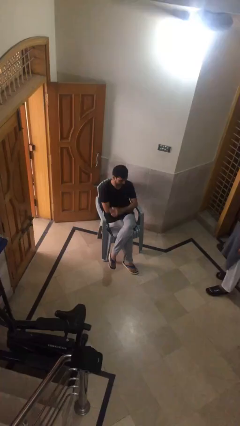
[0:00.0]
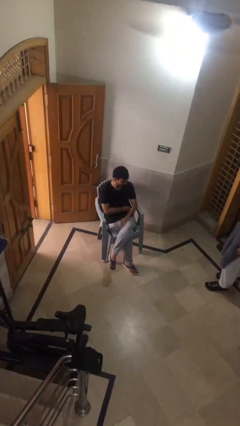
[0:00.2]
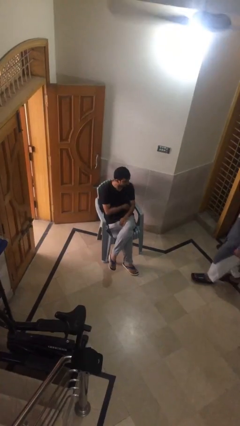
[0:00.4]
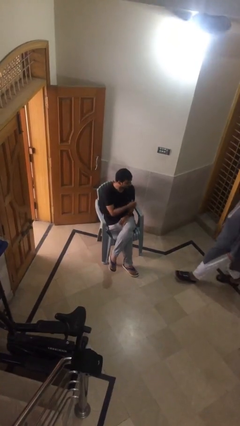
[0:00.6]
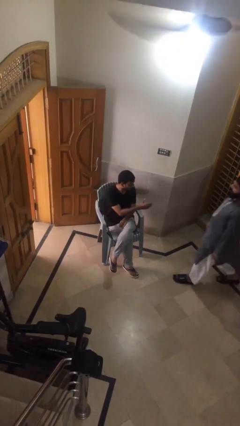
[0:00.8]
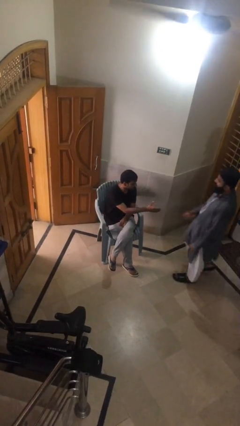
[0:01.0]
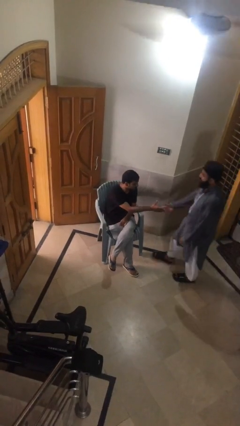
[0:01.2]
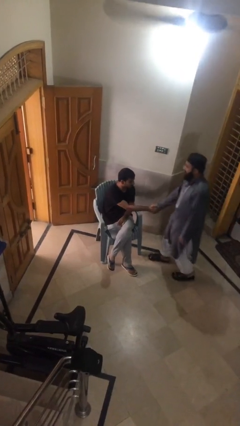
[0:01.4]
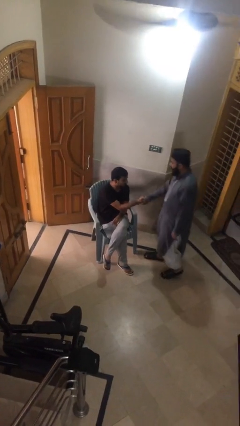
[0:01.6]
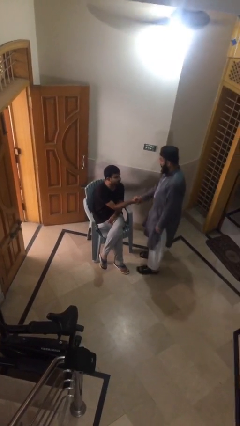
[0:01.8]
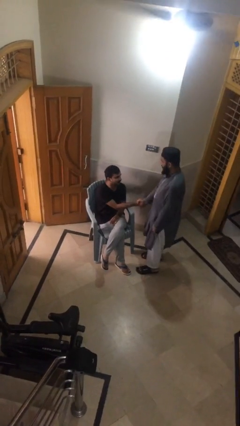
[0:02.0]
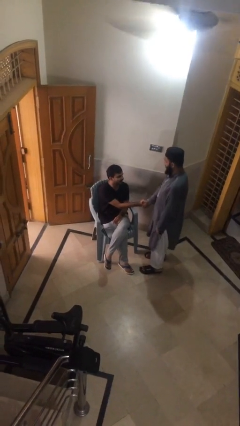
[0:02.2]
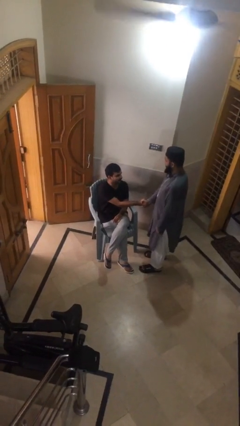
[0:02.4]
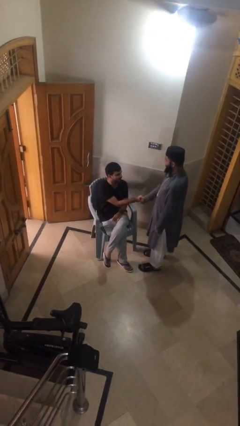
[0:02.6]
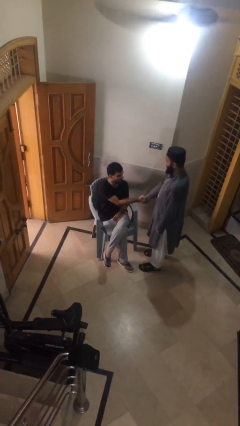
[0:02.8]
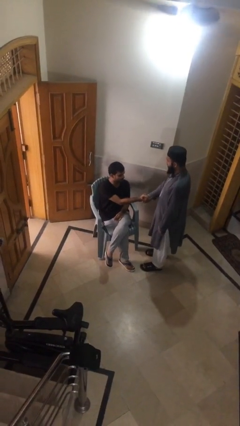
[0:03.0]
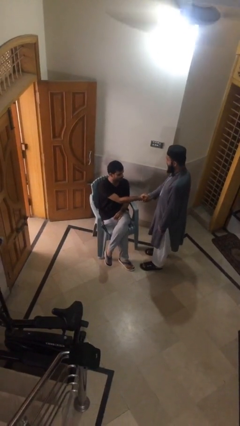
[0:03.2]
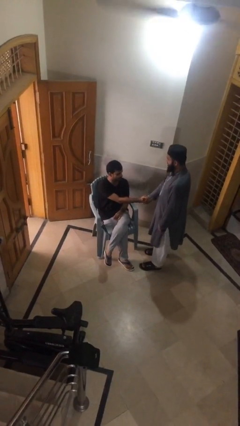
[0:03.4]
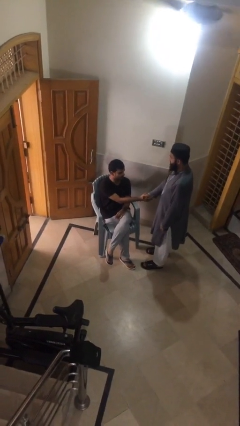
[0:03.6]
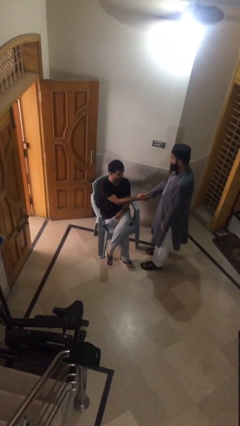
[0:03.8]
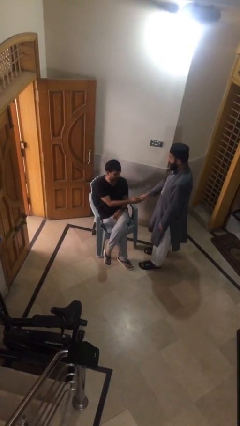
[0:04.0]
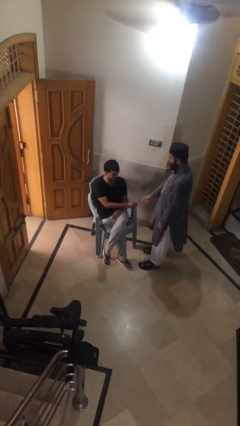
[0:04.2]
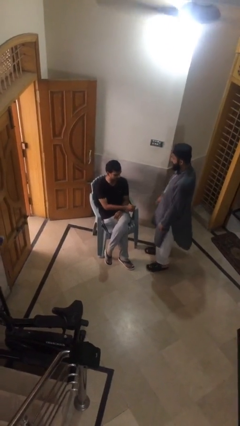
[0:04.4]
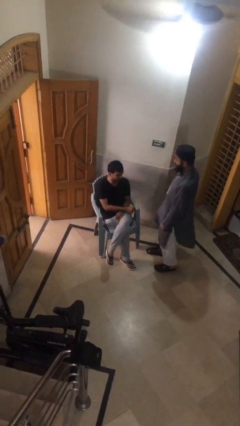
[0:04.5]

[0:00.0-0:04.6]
person shakes hand

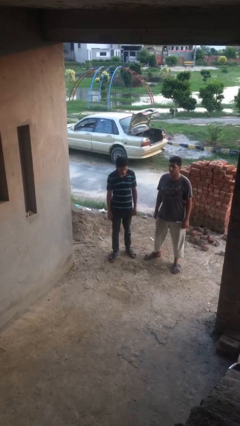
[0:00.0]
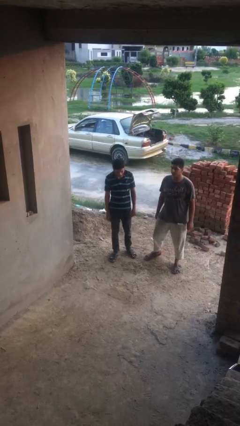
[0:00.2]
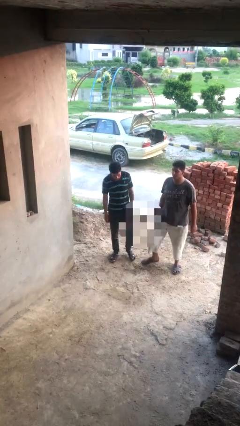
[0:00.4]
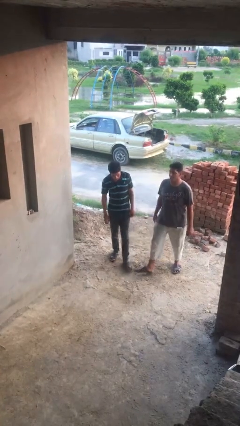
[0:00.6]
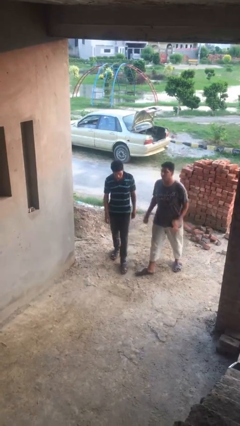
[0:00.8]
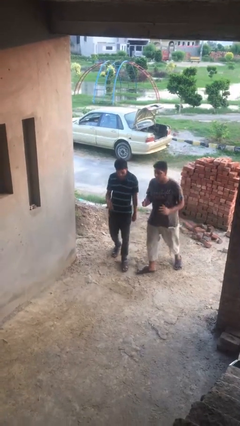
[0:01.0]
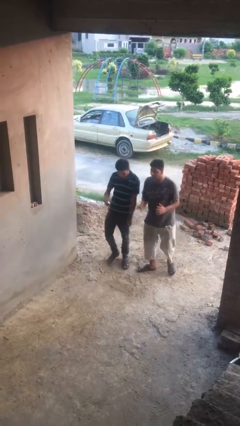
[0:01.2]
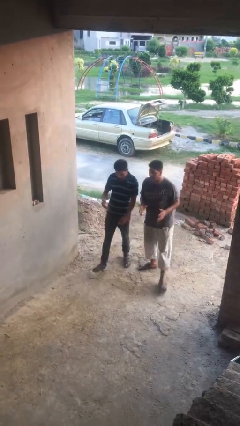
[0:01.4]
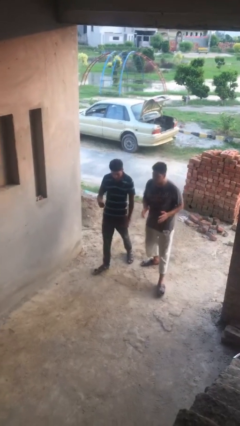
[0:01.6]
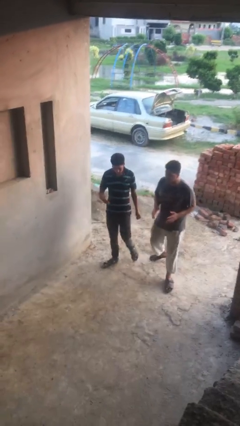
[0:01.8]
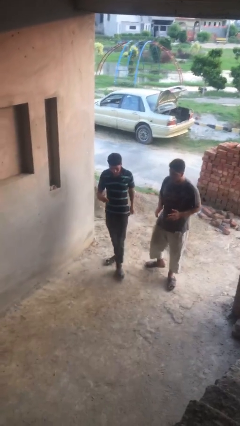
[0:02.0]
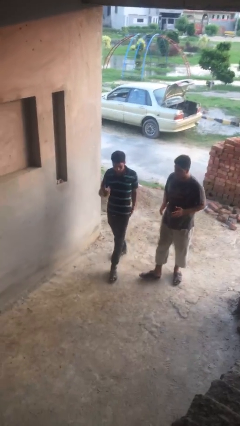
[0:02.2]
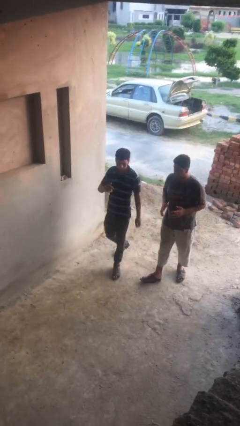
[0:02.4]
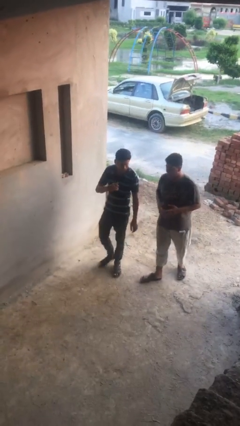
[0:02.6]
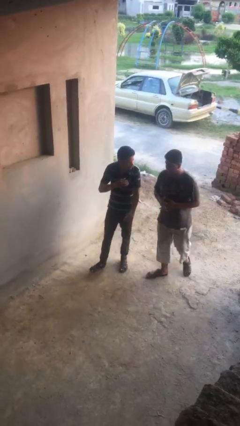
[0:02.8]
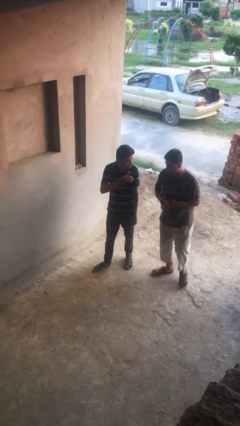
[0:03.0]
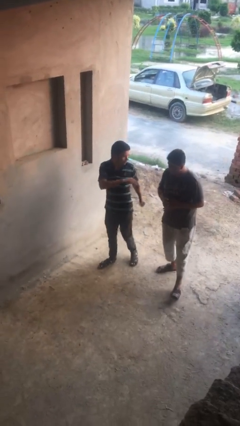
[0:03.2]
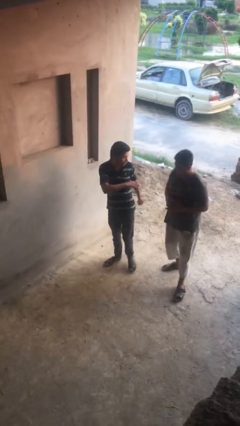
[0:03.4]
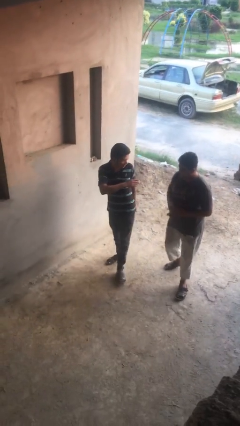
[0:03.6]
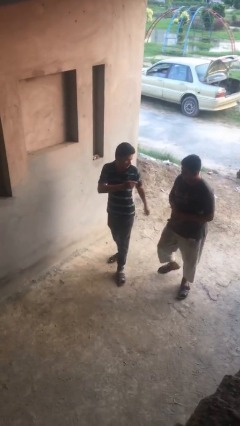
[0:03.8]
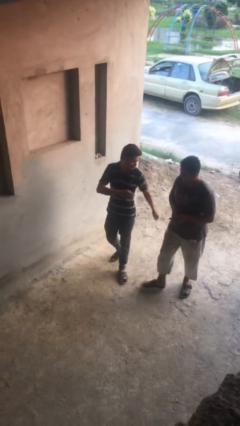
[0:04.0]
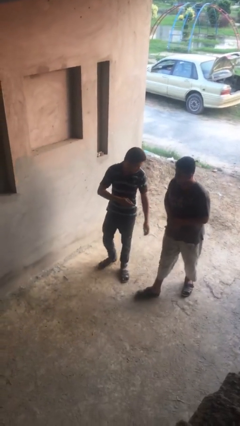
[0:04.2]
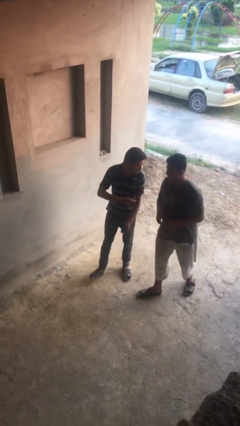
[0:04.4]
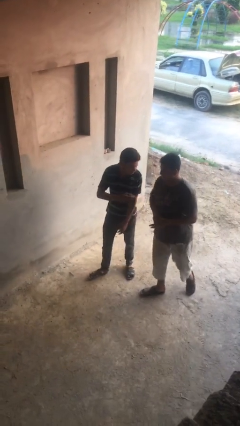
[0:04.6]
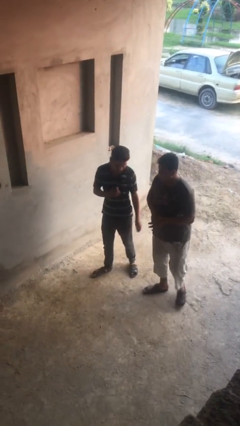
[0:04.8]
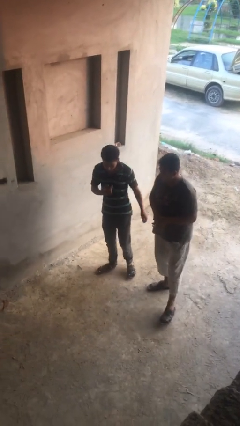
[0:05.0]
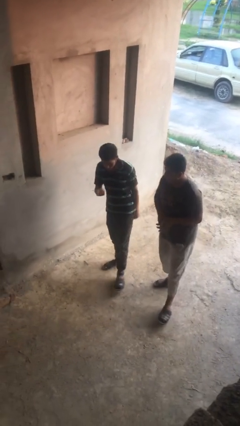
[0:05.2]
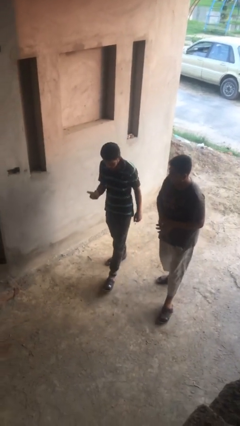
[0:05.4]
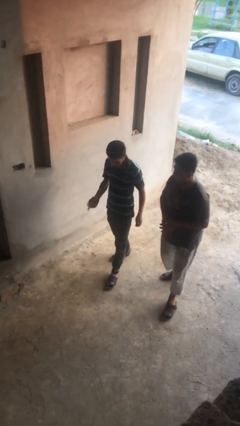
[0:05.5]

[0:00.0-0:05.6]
person talks to person

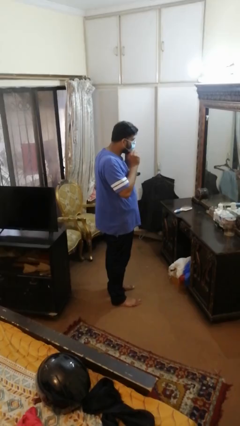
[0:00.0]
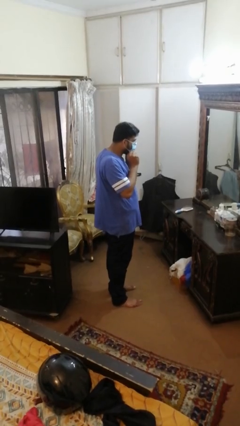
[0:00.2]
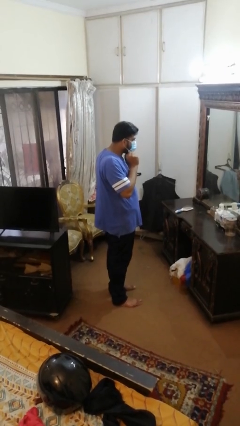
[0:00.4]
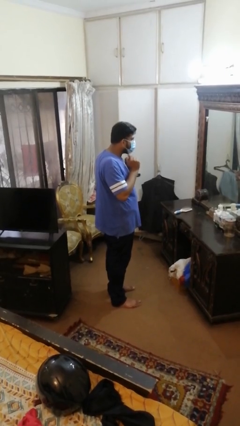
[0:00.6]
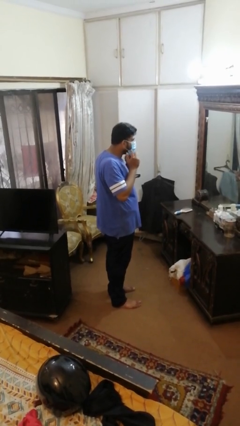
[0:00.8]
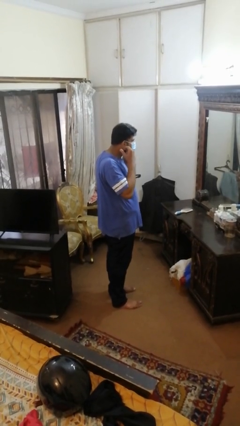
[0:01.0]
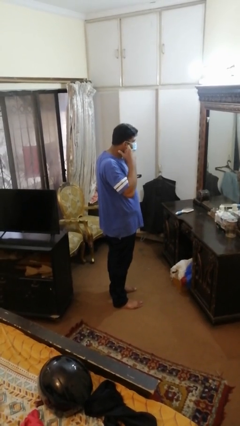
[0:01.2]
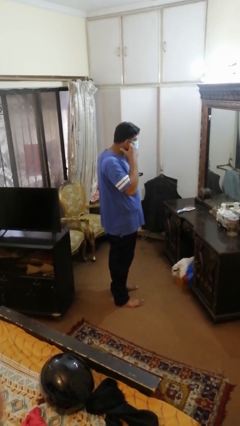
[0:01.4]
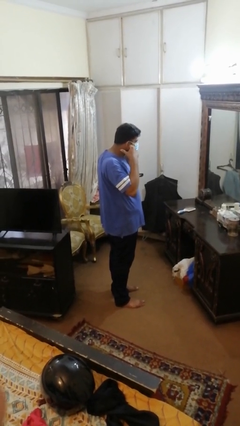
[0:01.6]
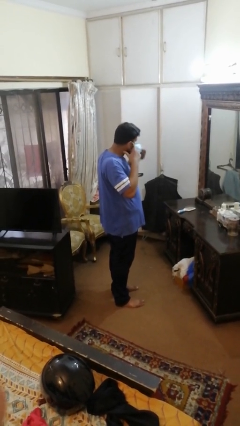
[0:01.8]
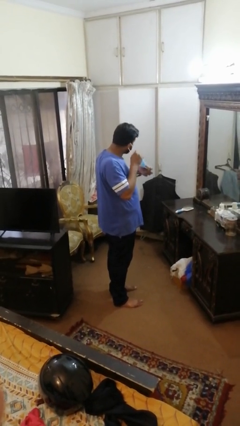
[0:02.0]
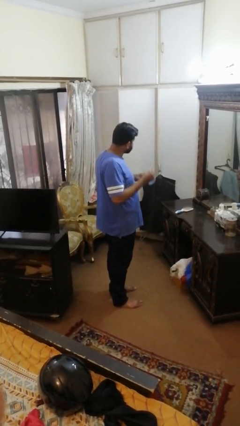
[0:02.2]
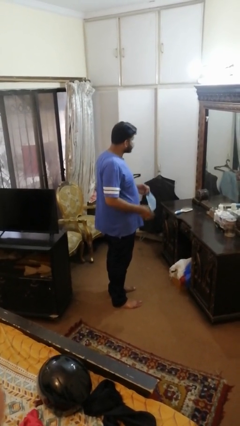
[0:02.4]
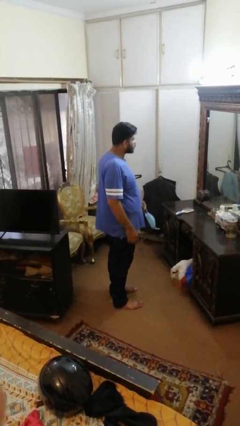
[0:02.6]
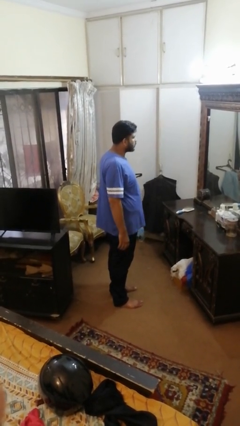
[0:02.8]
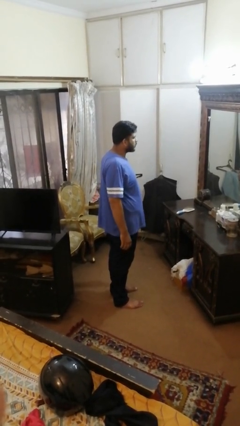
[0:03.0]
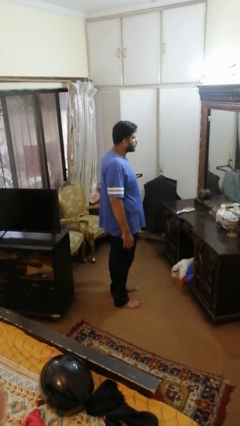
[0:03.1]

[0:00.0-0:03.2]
person takes off facemask

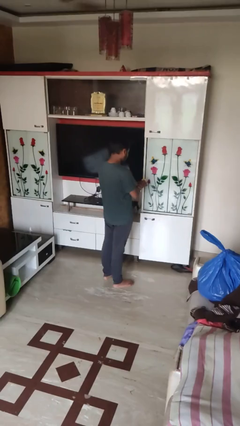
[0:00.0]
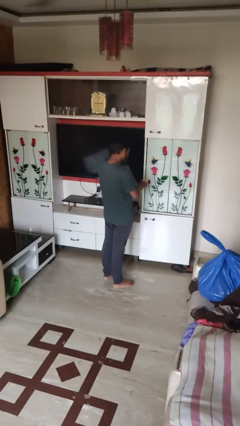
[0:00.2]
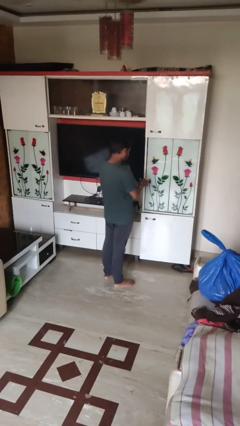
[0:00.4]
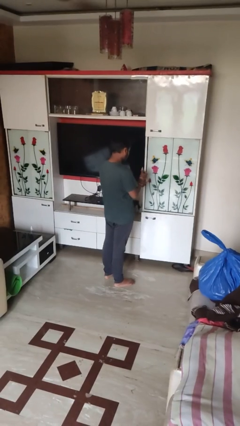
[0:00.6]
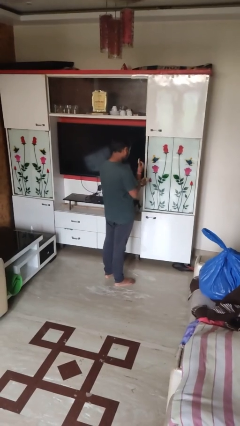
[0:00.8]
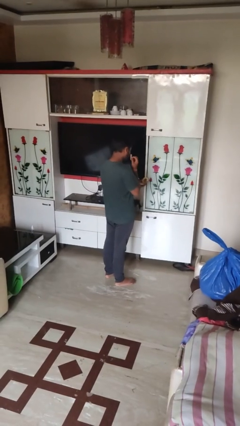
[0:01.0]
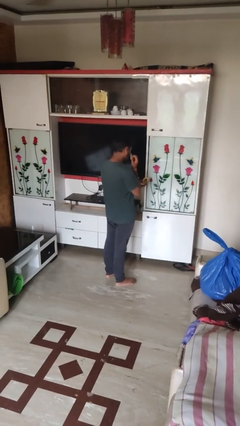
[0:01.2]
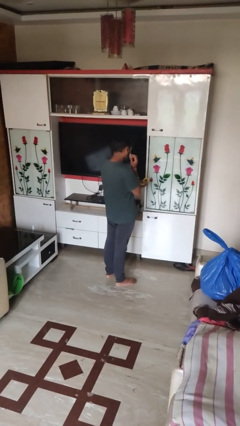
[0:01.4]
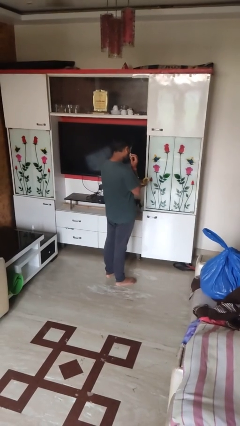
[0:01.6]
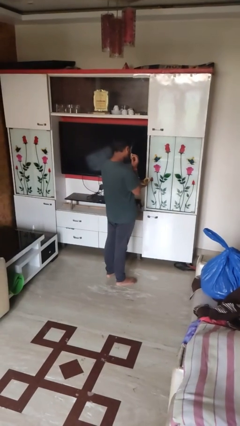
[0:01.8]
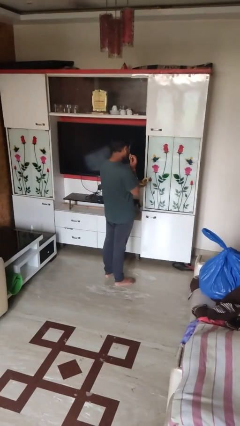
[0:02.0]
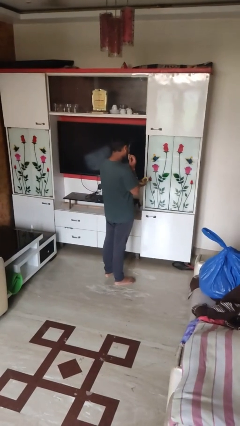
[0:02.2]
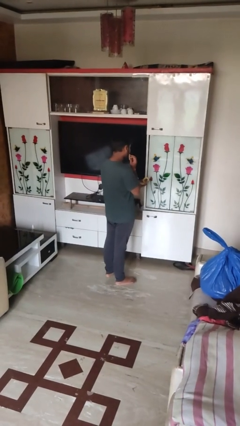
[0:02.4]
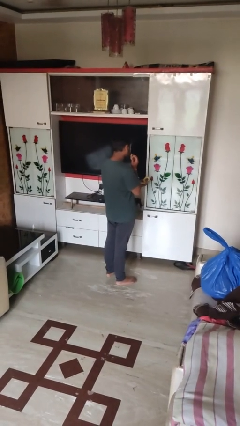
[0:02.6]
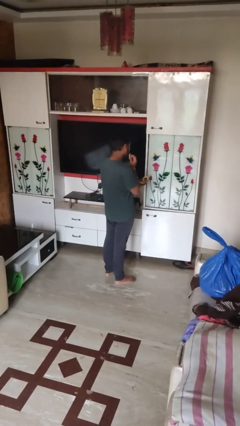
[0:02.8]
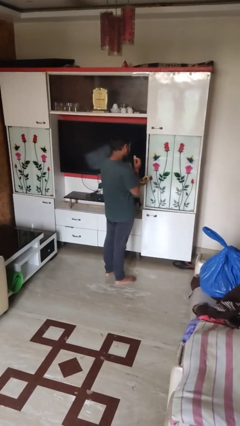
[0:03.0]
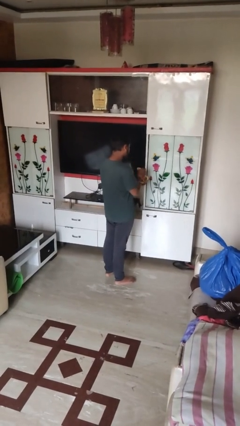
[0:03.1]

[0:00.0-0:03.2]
person applies foundation makeup

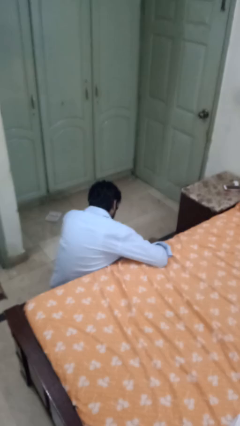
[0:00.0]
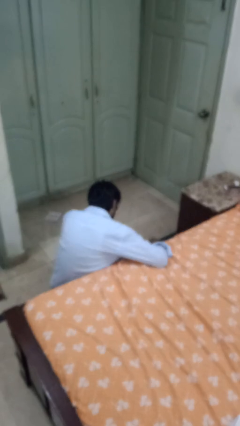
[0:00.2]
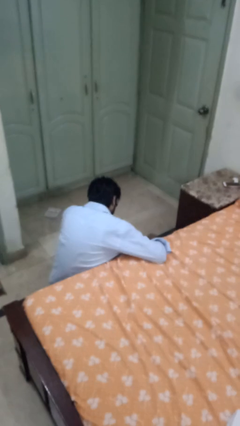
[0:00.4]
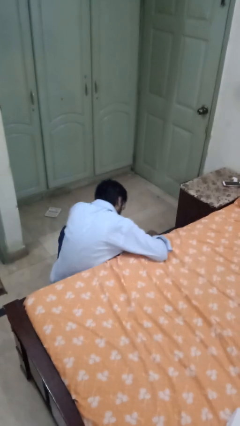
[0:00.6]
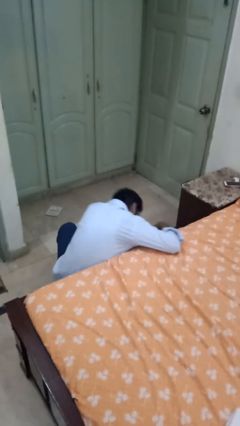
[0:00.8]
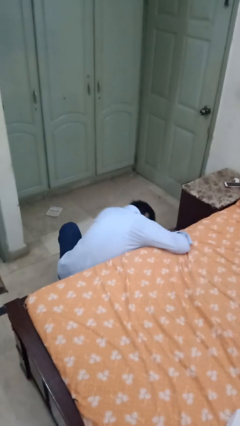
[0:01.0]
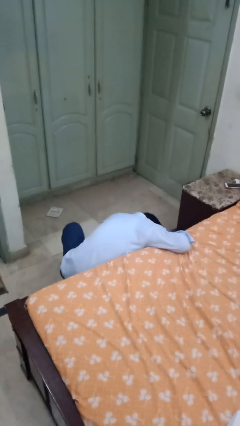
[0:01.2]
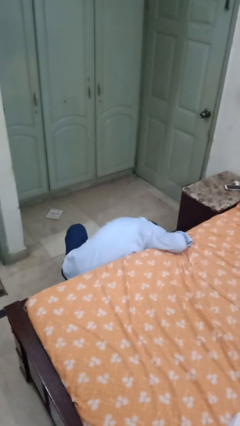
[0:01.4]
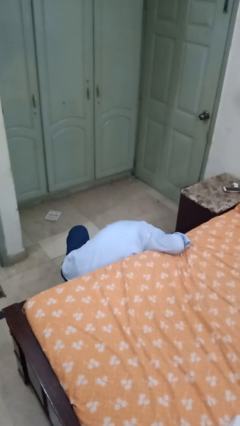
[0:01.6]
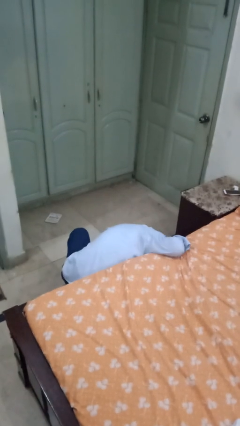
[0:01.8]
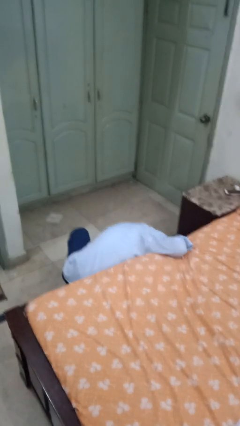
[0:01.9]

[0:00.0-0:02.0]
person searches under bed
